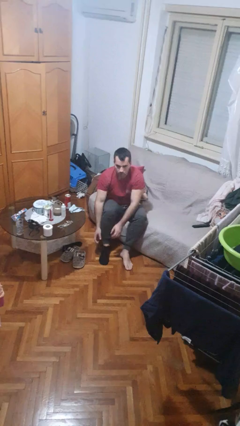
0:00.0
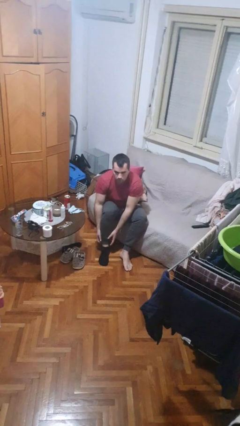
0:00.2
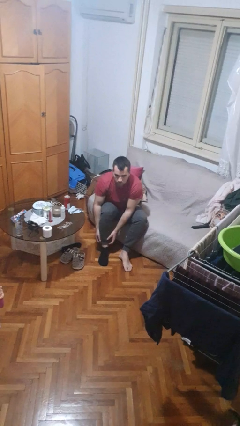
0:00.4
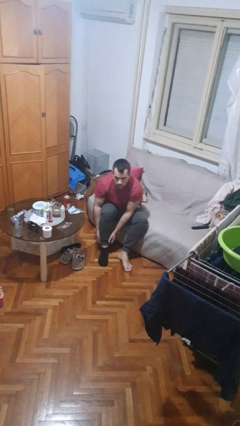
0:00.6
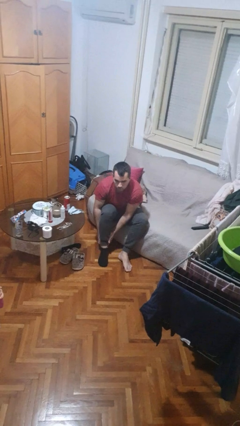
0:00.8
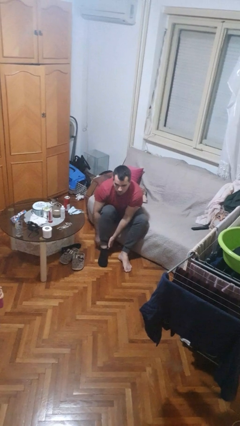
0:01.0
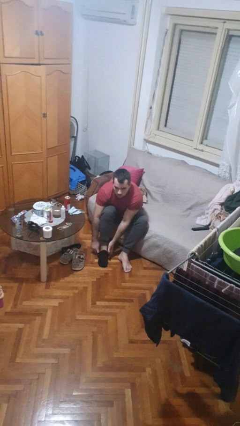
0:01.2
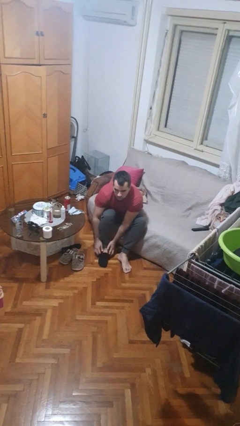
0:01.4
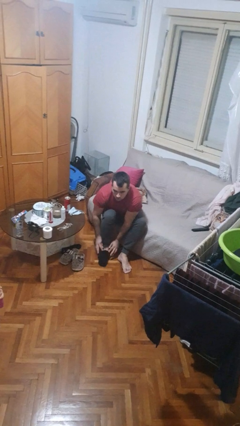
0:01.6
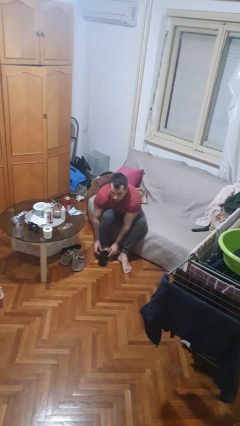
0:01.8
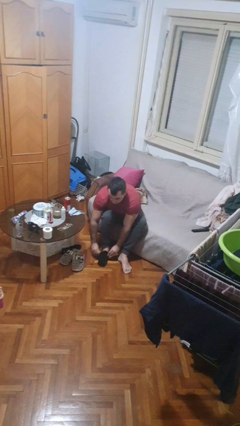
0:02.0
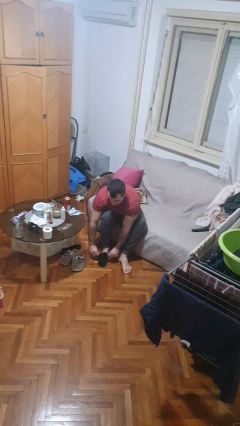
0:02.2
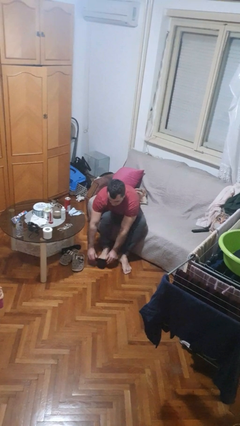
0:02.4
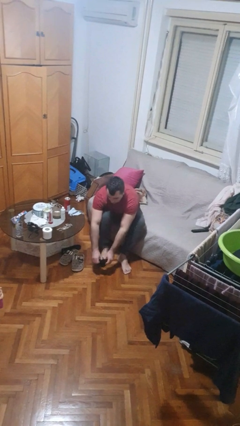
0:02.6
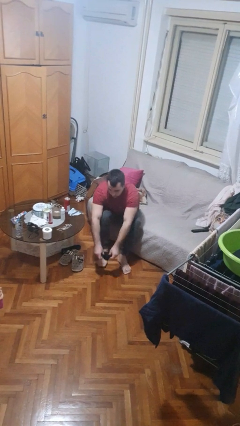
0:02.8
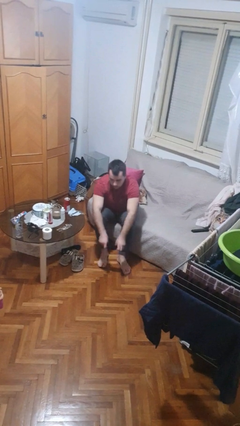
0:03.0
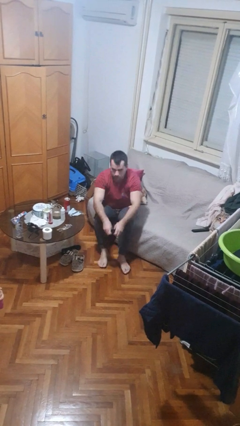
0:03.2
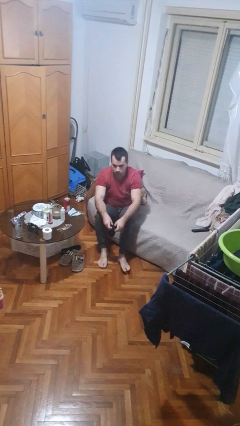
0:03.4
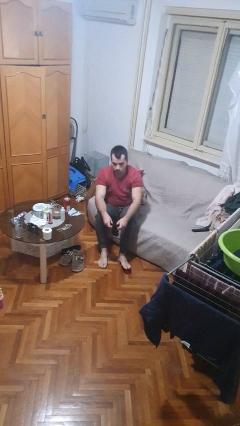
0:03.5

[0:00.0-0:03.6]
person takes off socks

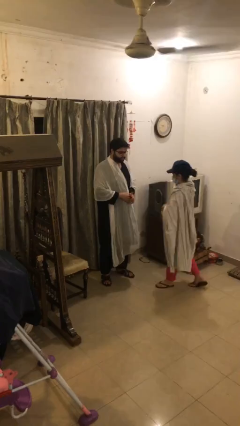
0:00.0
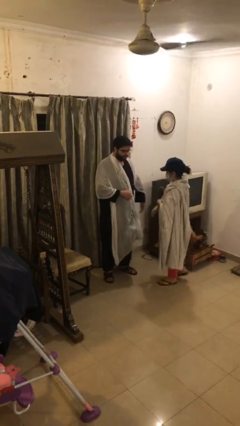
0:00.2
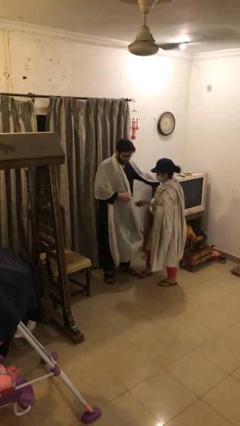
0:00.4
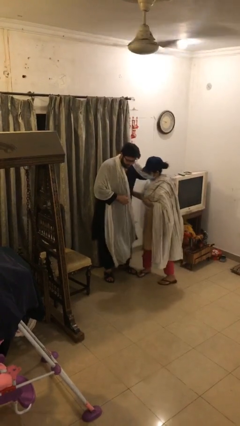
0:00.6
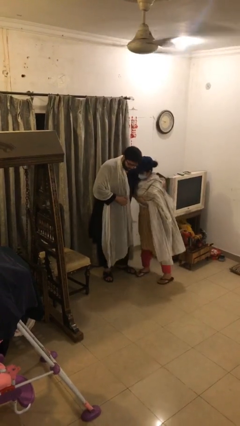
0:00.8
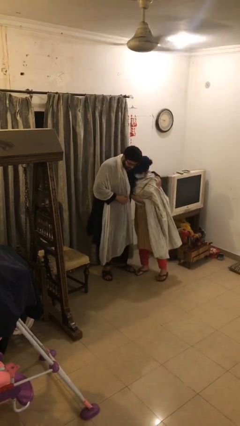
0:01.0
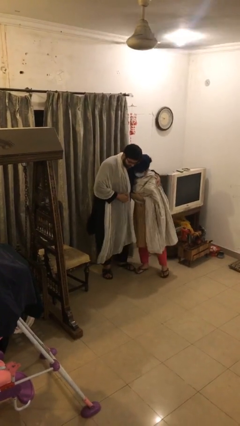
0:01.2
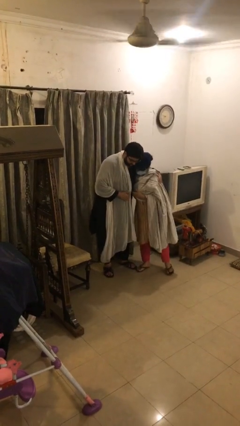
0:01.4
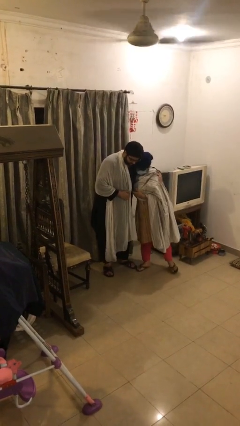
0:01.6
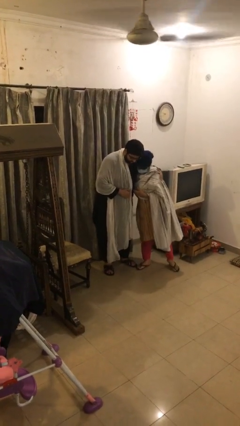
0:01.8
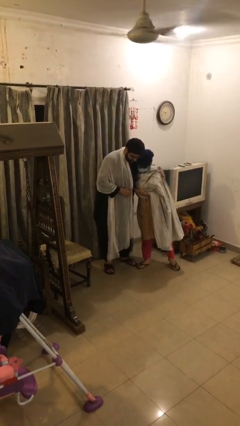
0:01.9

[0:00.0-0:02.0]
person embraces person

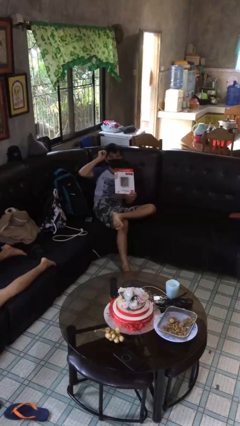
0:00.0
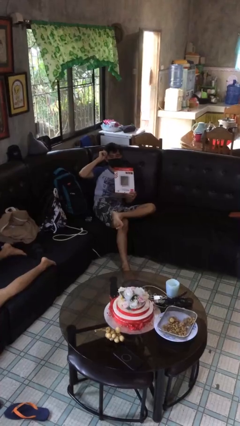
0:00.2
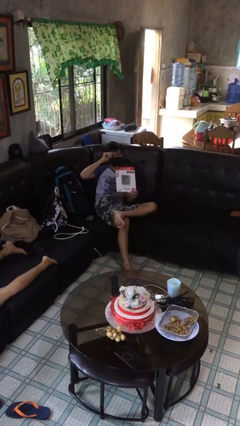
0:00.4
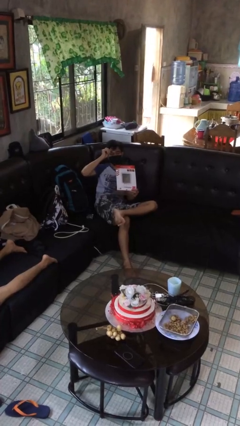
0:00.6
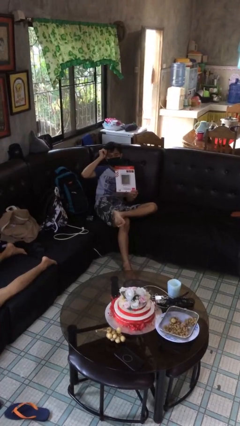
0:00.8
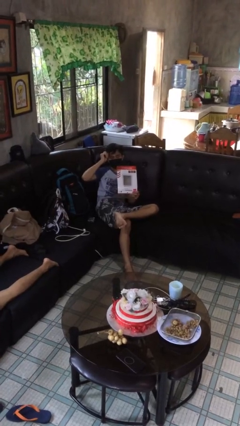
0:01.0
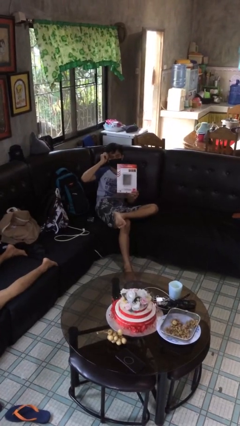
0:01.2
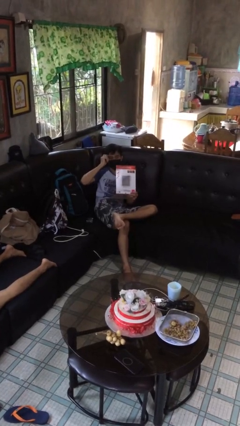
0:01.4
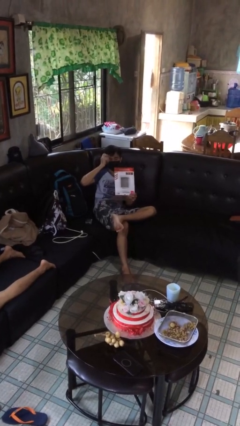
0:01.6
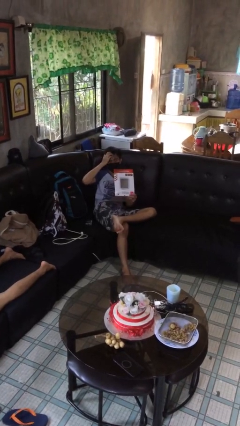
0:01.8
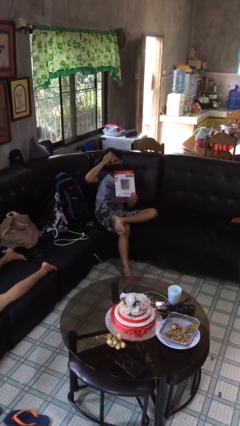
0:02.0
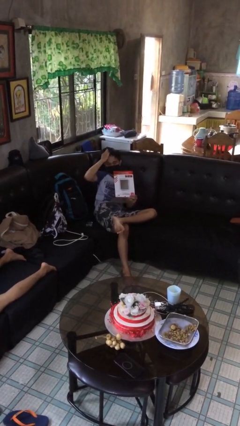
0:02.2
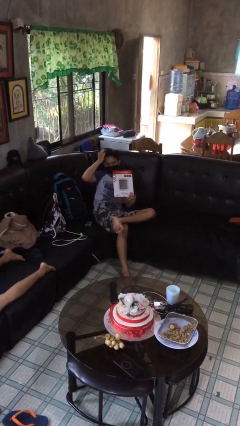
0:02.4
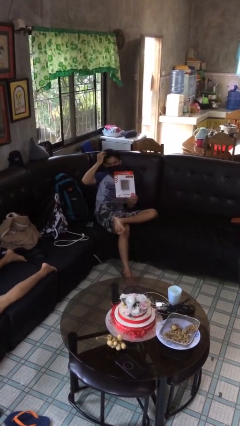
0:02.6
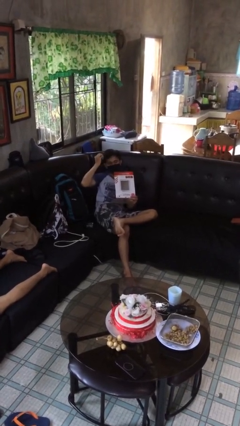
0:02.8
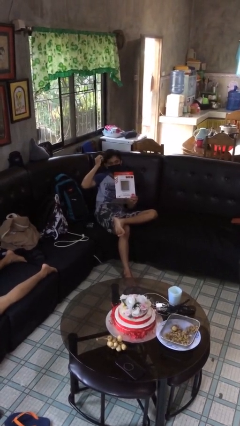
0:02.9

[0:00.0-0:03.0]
person reads document

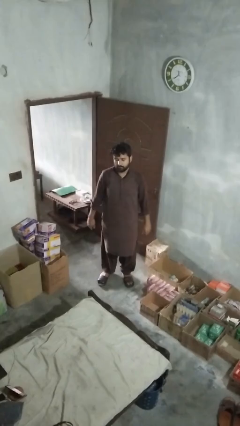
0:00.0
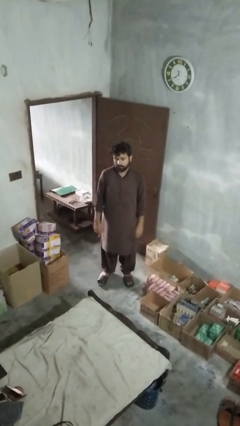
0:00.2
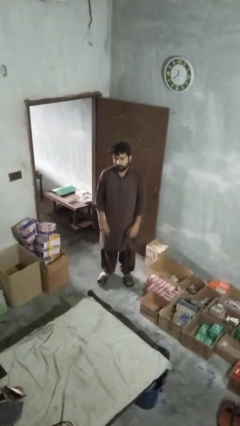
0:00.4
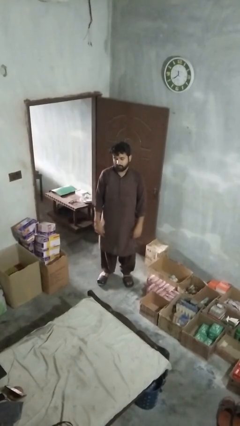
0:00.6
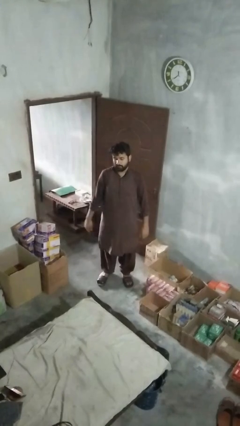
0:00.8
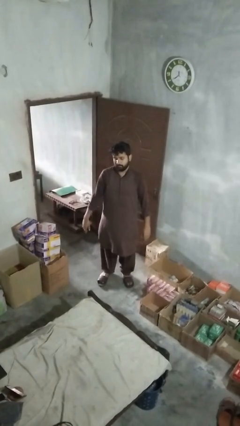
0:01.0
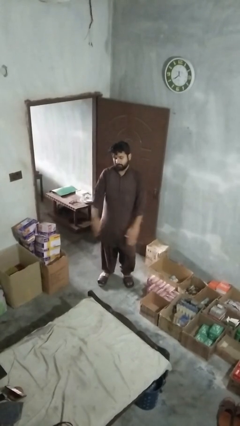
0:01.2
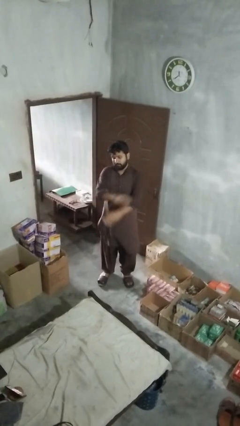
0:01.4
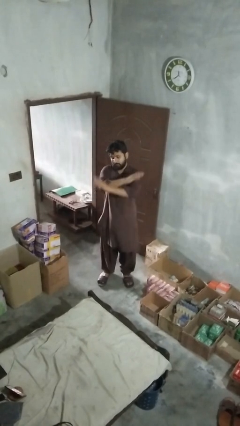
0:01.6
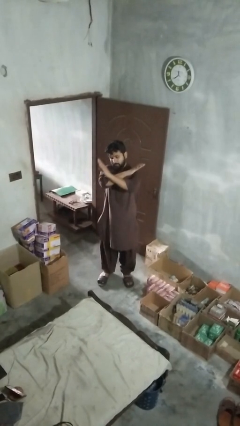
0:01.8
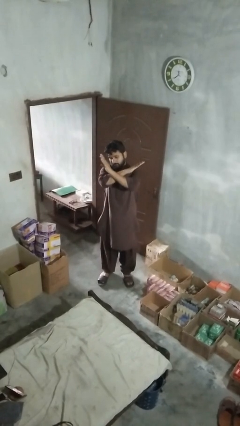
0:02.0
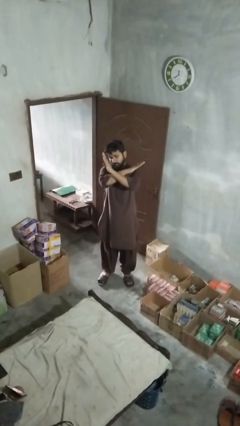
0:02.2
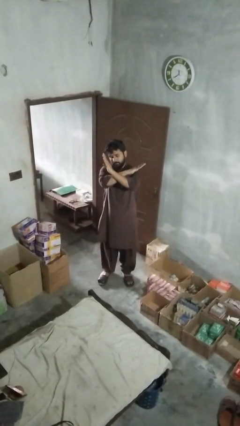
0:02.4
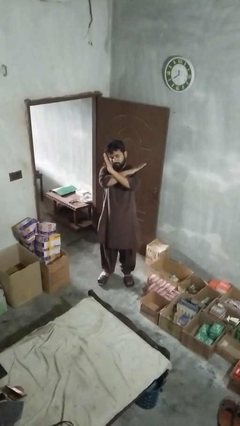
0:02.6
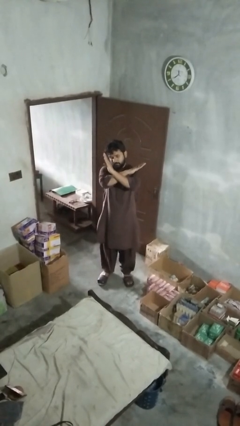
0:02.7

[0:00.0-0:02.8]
person gestures arms x

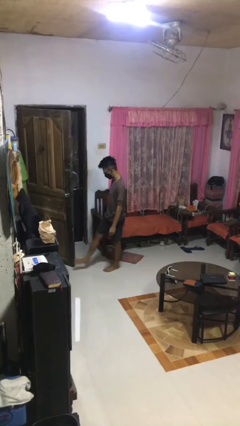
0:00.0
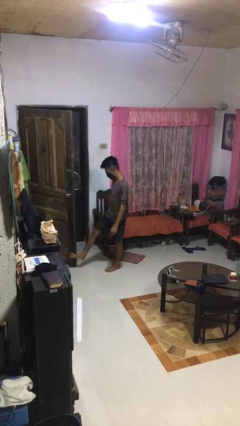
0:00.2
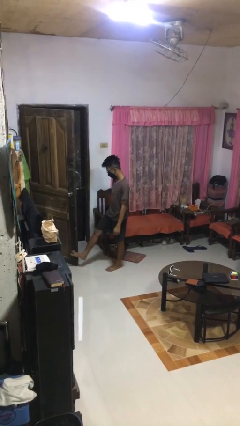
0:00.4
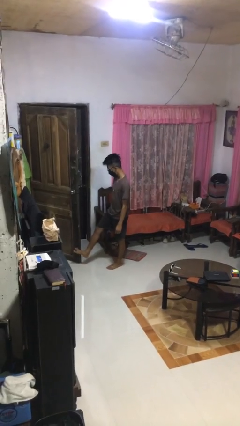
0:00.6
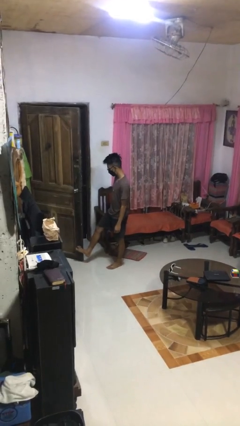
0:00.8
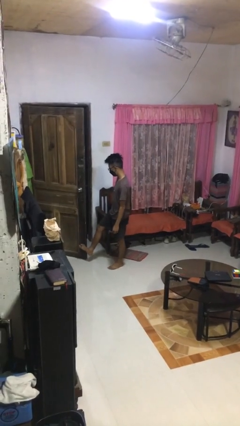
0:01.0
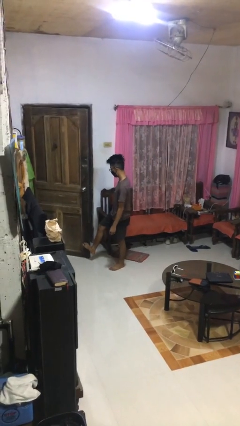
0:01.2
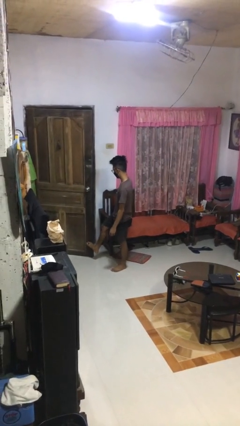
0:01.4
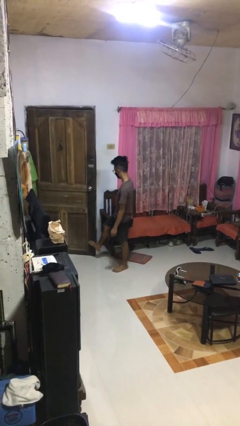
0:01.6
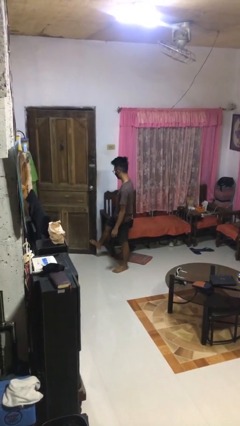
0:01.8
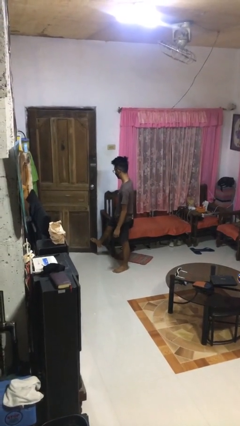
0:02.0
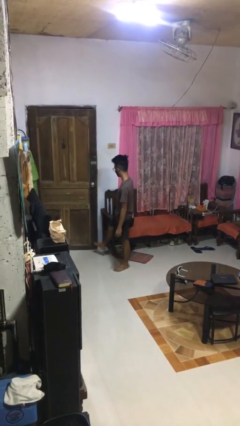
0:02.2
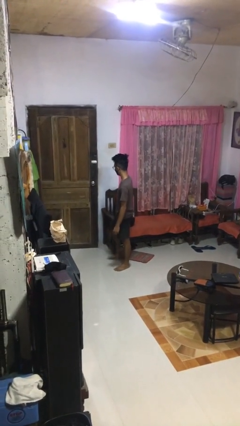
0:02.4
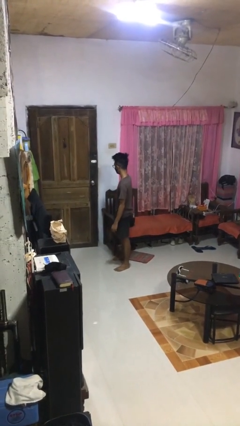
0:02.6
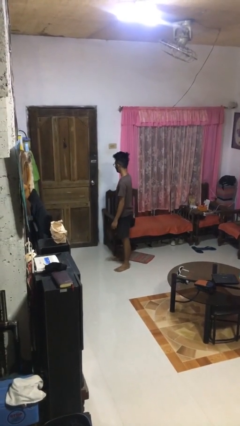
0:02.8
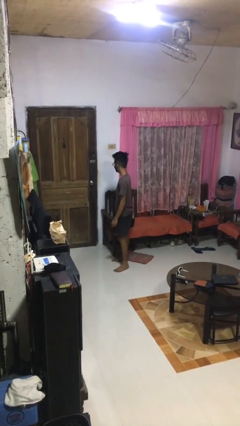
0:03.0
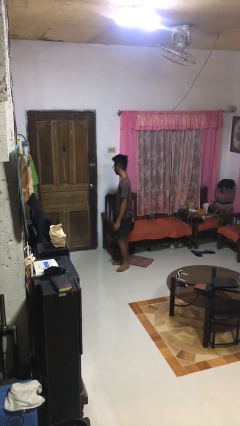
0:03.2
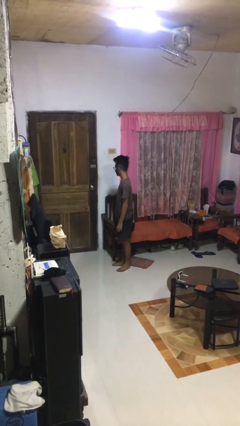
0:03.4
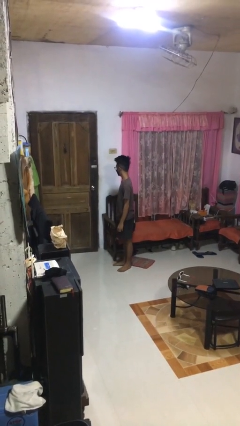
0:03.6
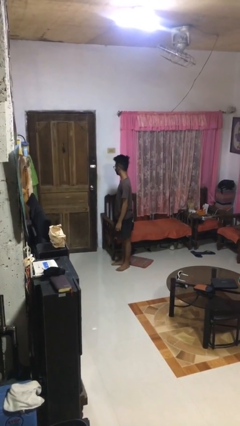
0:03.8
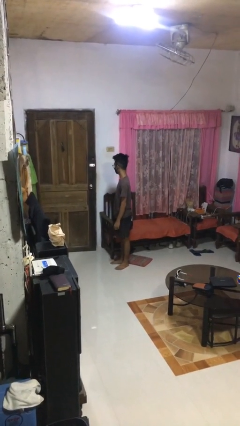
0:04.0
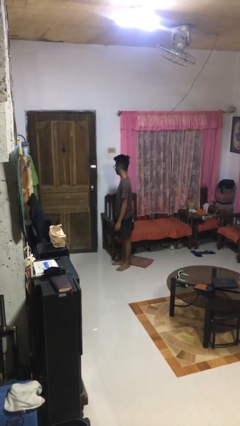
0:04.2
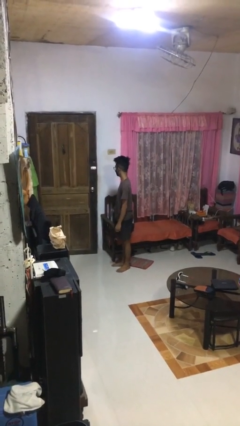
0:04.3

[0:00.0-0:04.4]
person closes door with foot

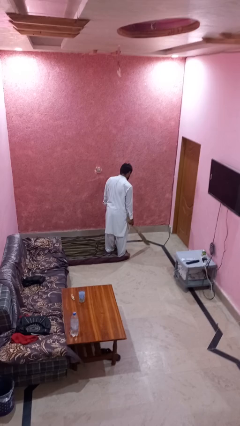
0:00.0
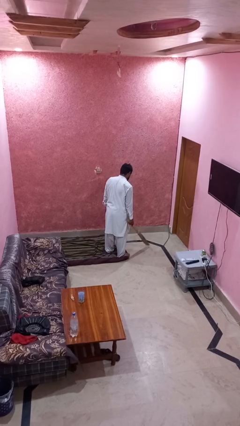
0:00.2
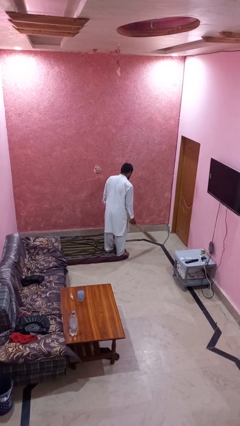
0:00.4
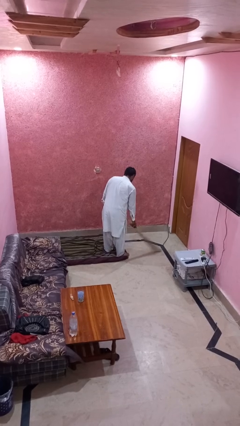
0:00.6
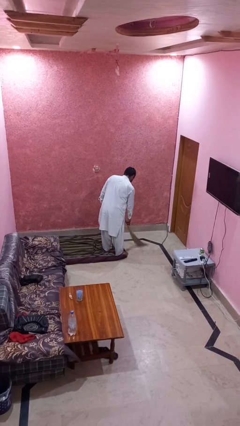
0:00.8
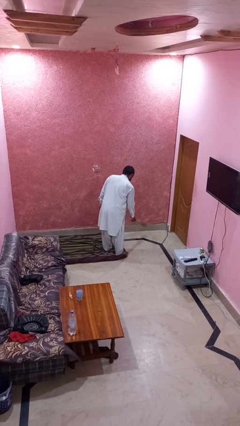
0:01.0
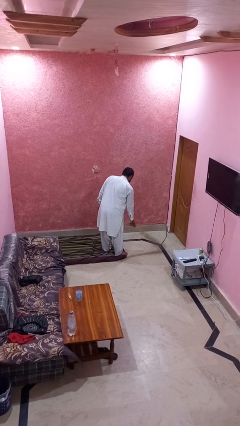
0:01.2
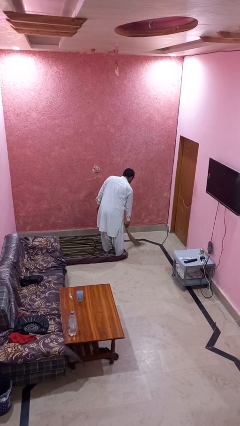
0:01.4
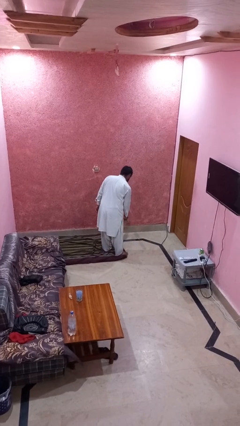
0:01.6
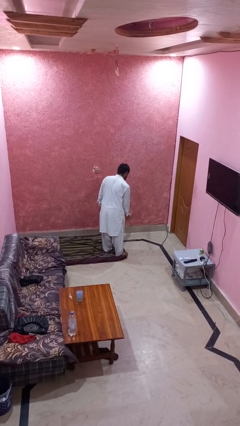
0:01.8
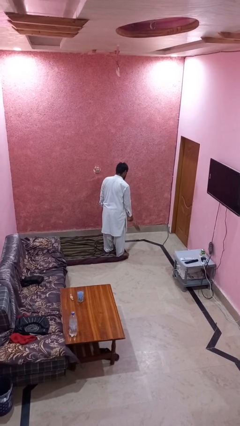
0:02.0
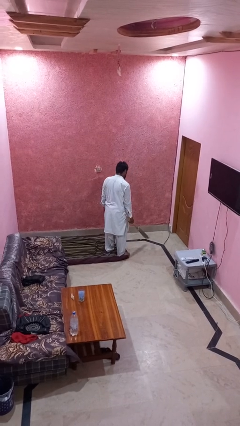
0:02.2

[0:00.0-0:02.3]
person sweeps floor
